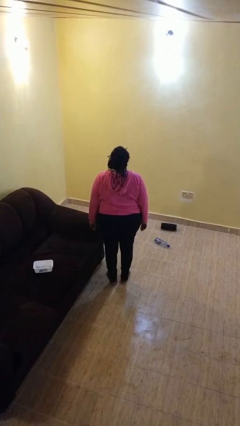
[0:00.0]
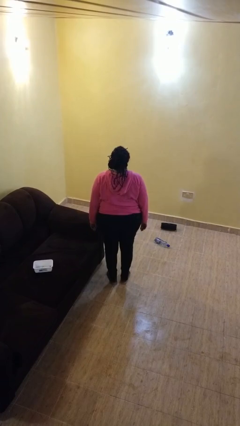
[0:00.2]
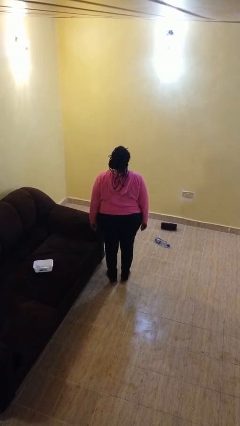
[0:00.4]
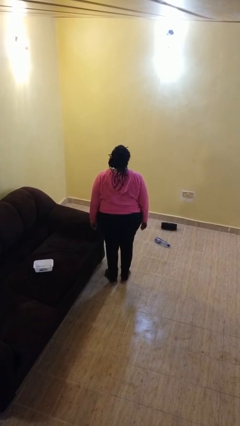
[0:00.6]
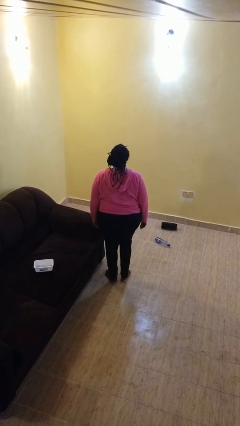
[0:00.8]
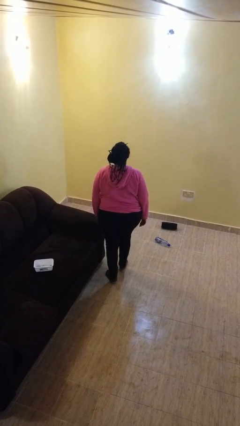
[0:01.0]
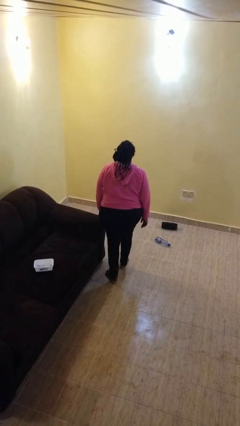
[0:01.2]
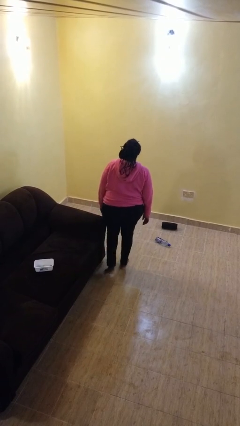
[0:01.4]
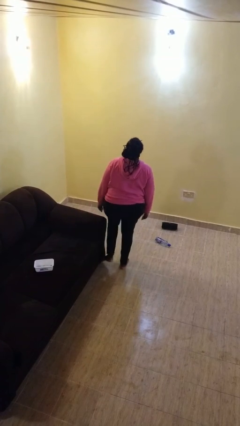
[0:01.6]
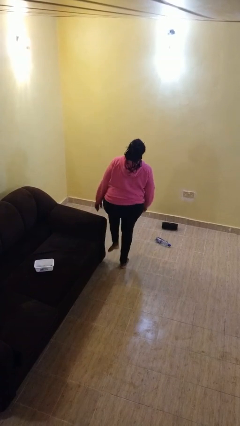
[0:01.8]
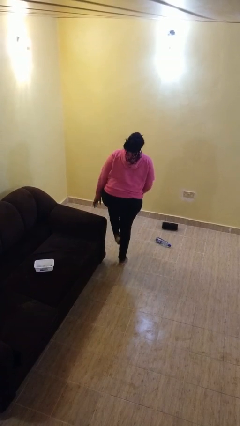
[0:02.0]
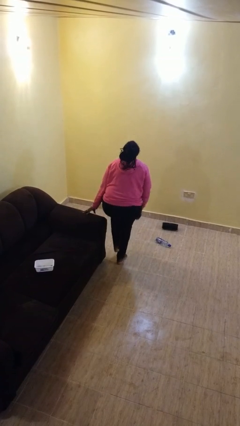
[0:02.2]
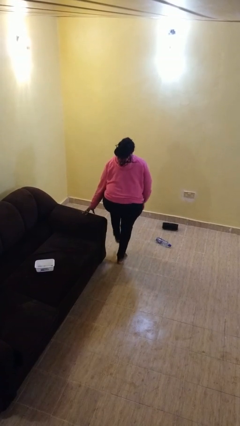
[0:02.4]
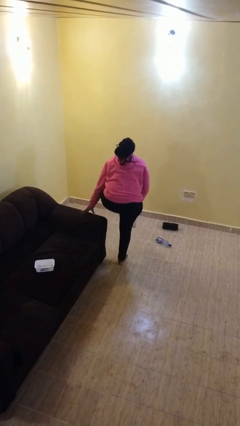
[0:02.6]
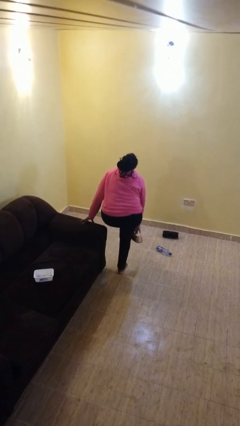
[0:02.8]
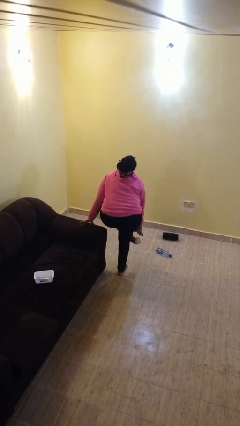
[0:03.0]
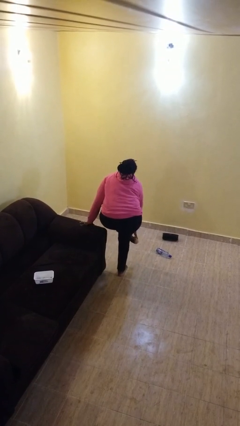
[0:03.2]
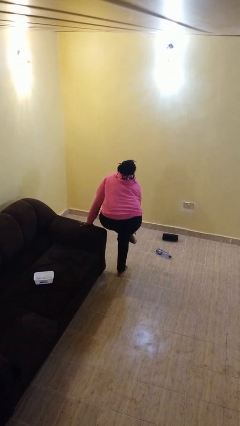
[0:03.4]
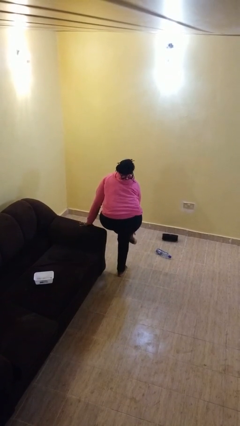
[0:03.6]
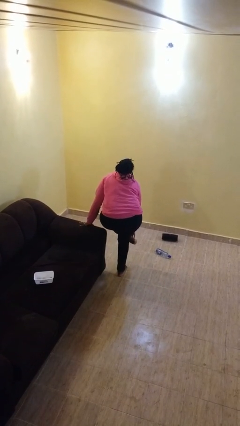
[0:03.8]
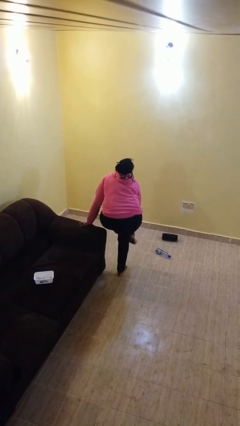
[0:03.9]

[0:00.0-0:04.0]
person stubs toe

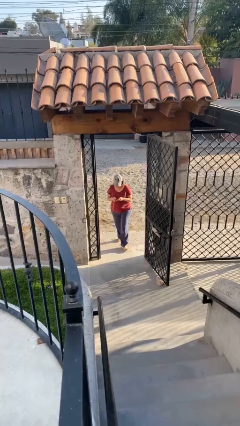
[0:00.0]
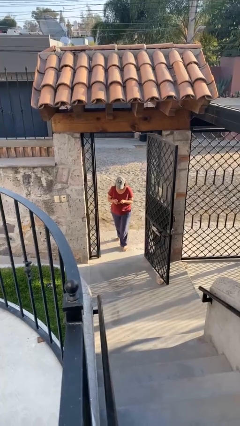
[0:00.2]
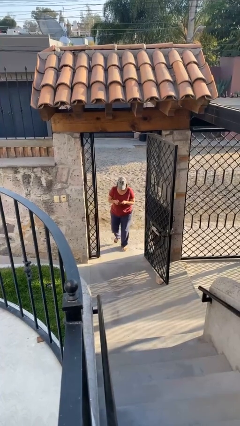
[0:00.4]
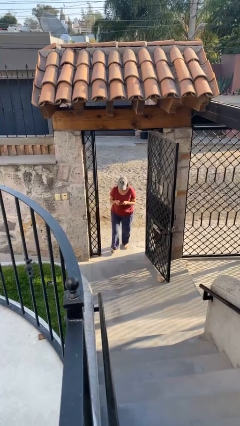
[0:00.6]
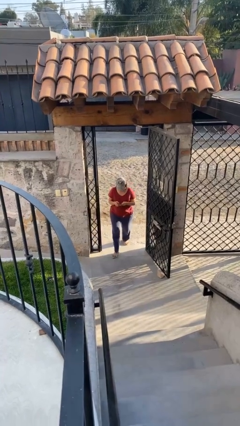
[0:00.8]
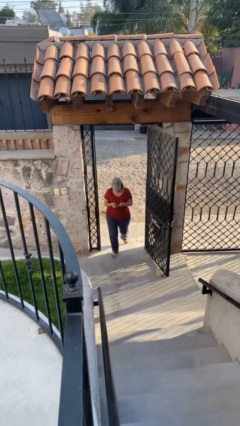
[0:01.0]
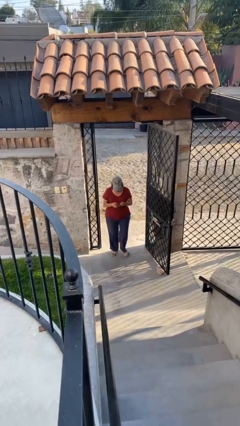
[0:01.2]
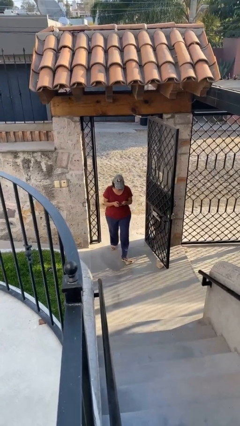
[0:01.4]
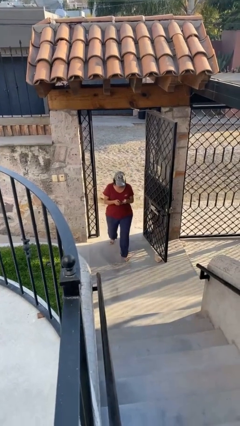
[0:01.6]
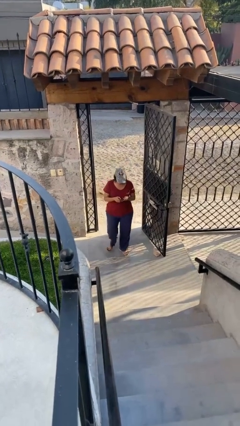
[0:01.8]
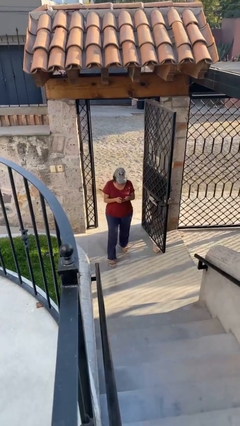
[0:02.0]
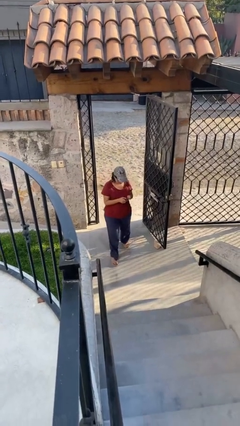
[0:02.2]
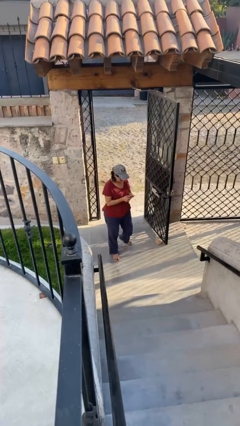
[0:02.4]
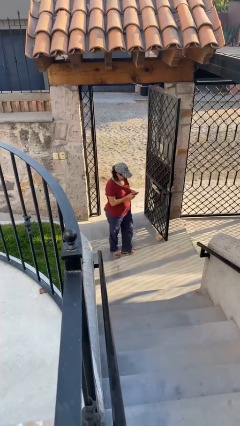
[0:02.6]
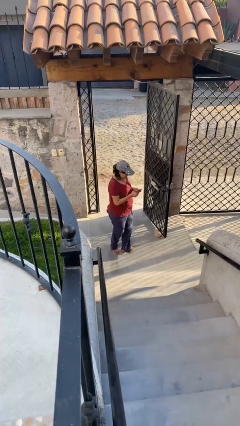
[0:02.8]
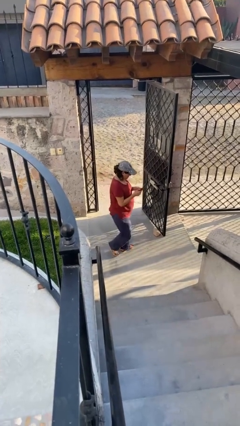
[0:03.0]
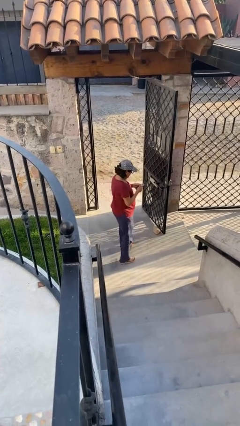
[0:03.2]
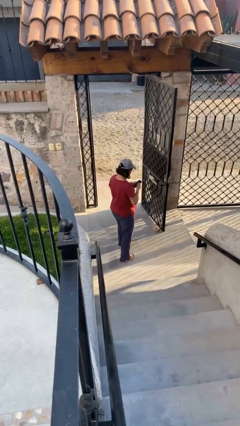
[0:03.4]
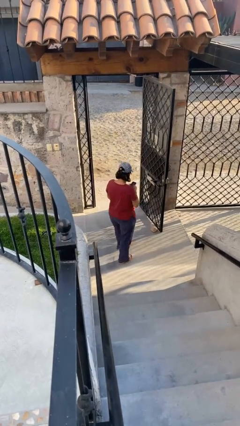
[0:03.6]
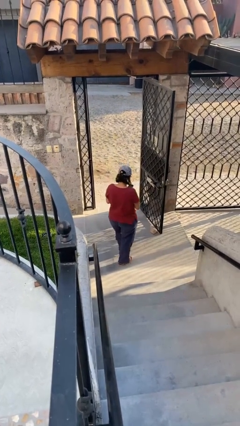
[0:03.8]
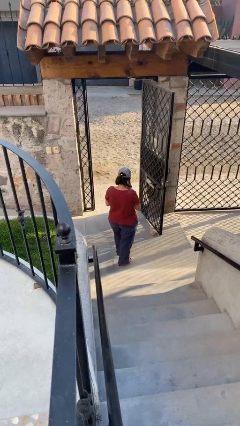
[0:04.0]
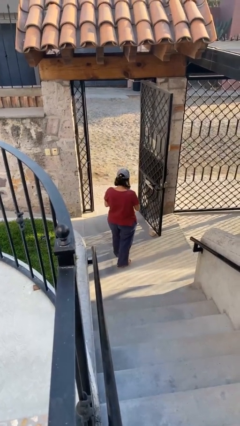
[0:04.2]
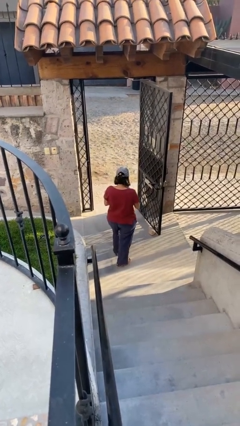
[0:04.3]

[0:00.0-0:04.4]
person enters scene through structure

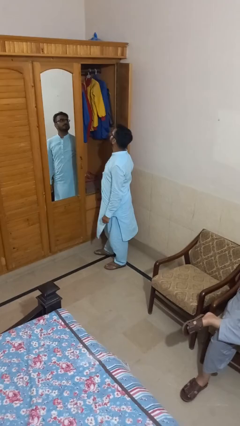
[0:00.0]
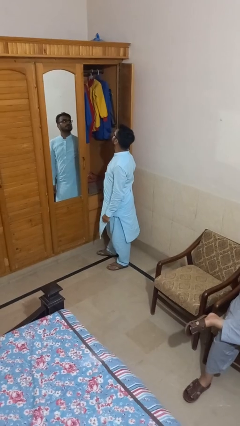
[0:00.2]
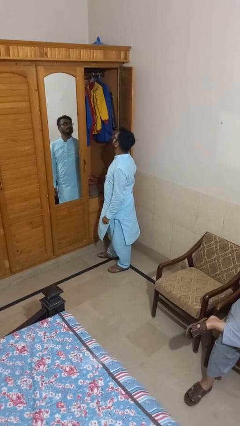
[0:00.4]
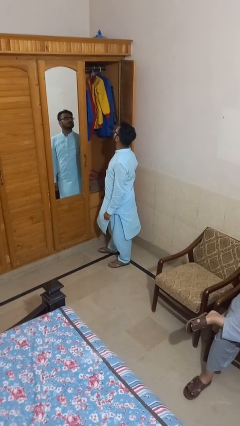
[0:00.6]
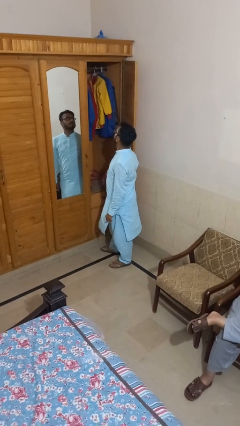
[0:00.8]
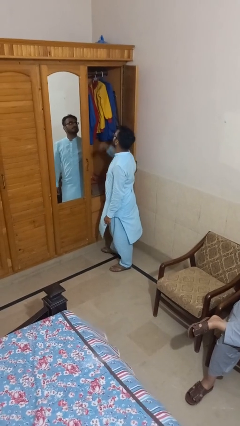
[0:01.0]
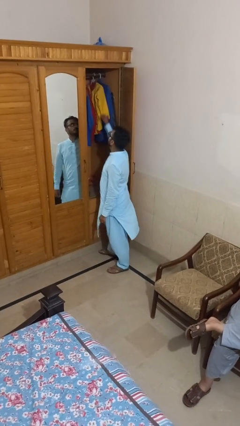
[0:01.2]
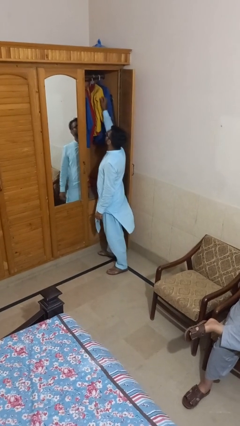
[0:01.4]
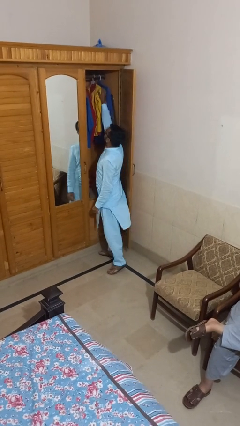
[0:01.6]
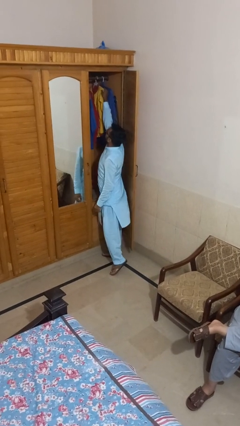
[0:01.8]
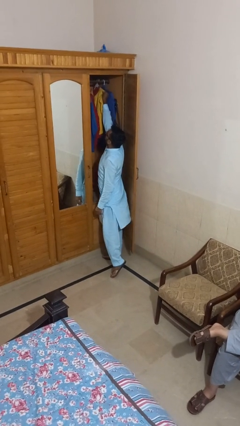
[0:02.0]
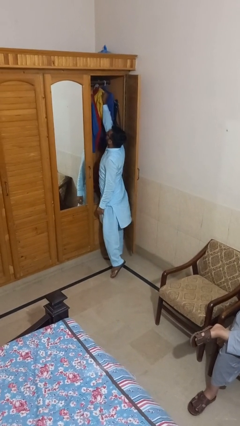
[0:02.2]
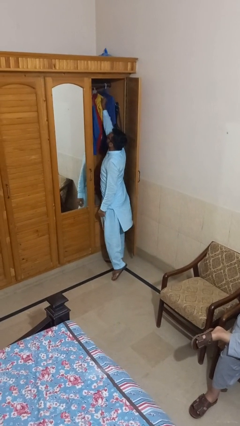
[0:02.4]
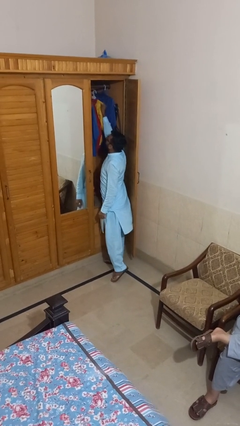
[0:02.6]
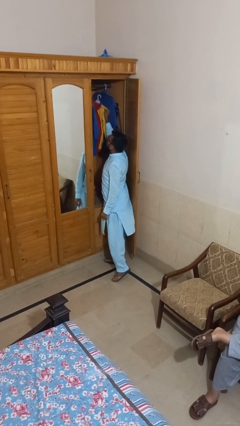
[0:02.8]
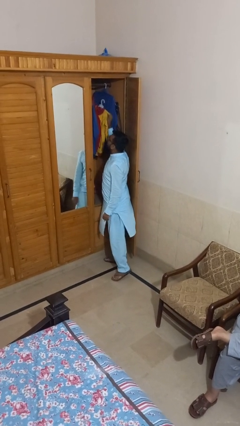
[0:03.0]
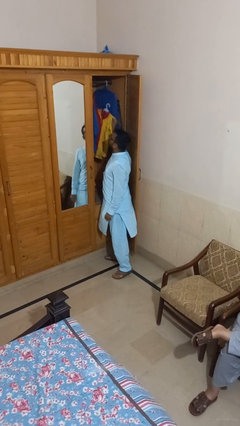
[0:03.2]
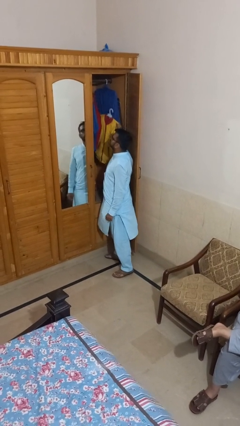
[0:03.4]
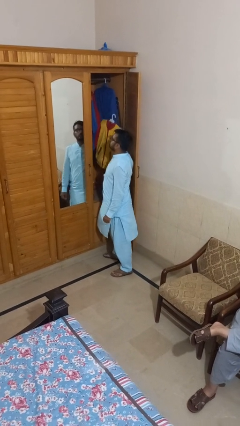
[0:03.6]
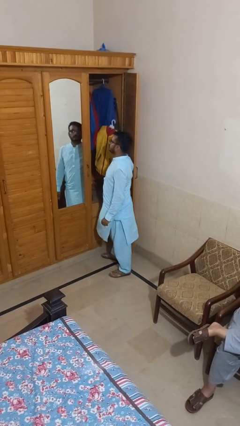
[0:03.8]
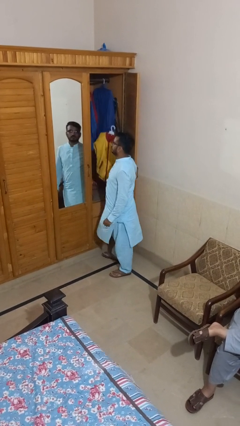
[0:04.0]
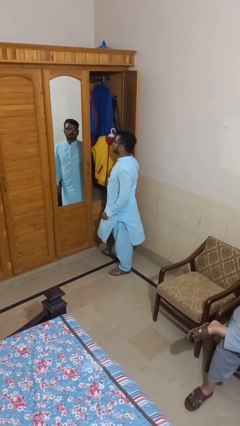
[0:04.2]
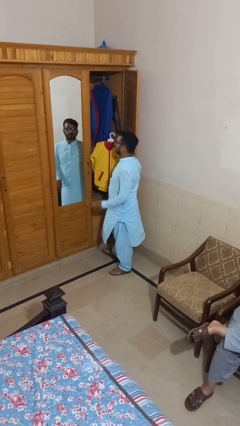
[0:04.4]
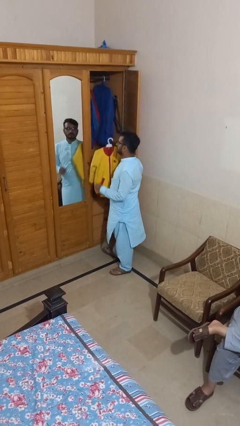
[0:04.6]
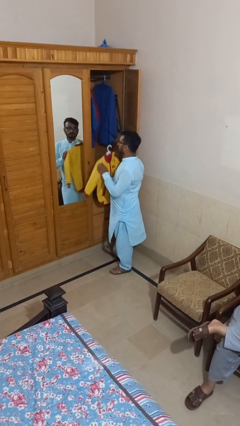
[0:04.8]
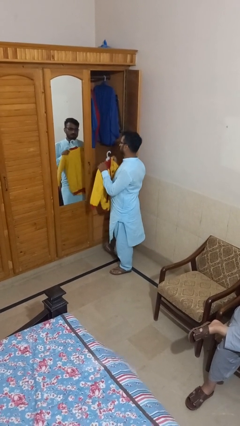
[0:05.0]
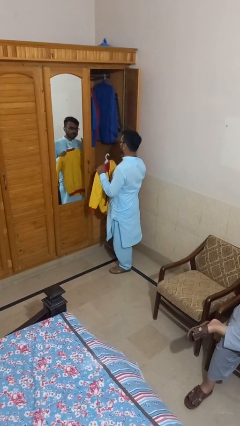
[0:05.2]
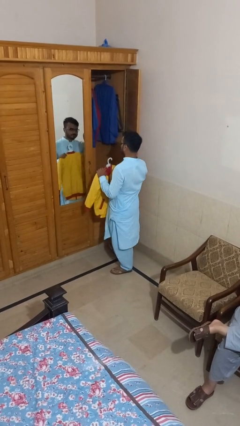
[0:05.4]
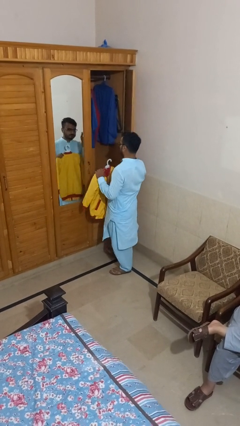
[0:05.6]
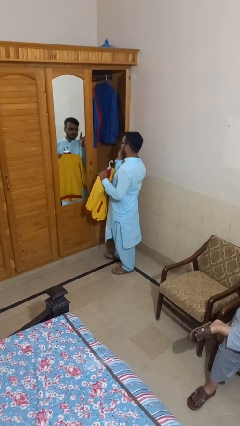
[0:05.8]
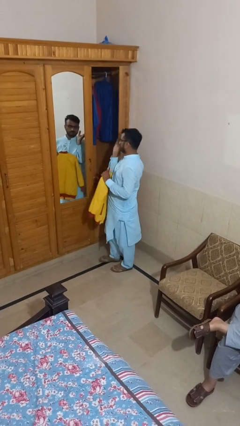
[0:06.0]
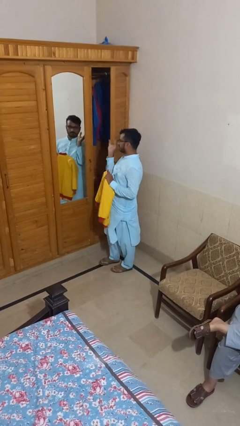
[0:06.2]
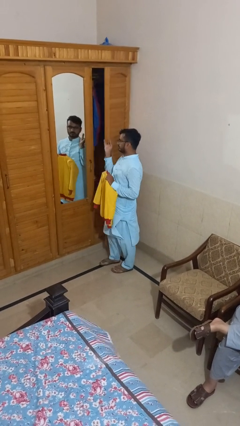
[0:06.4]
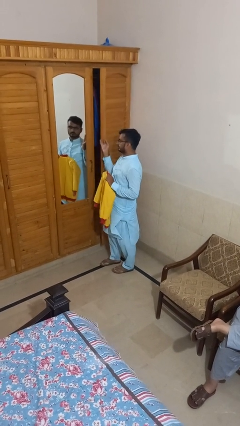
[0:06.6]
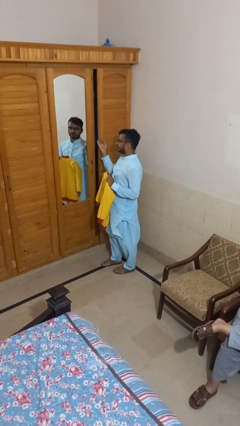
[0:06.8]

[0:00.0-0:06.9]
person takes clothes from closet

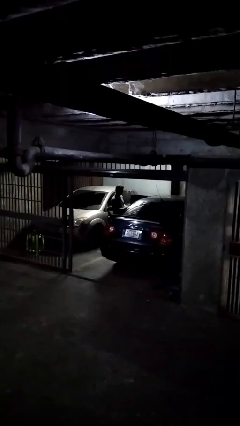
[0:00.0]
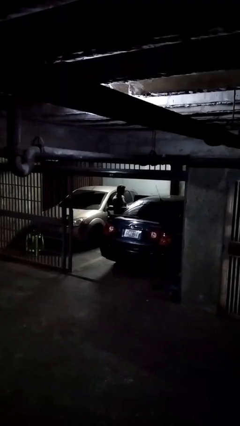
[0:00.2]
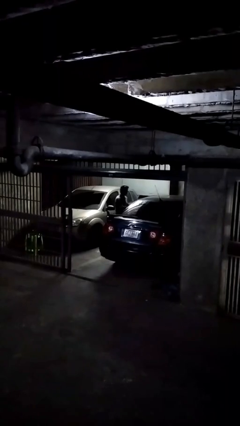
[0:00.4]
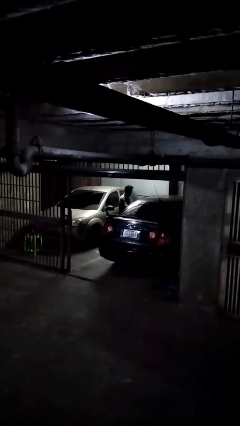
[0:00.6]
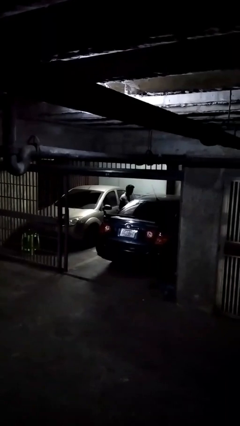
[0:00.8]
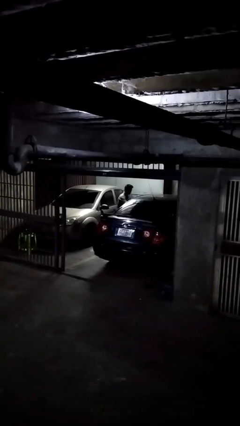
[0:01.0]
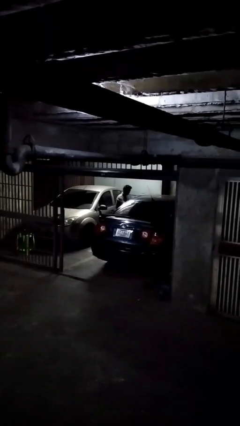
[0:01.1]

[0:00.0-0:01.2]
person closes car door

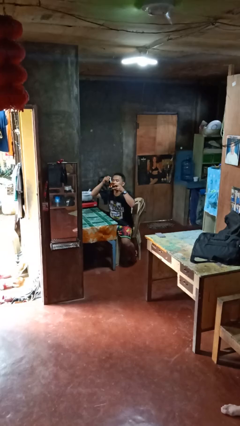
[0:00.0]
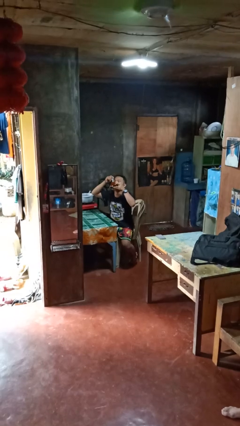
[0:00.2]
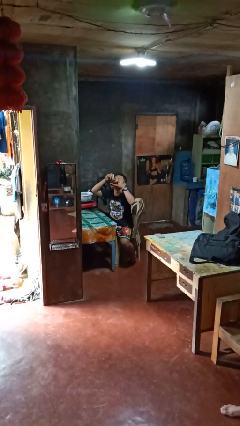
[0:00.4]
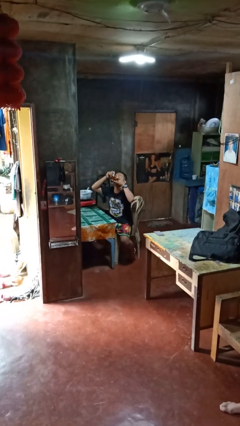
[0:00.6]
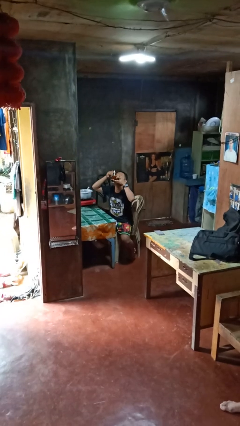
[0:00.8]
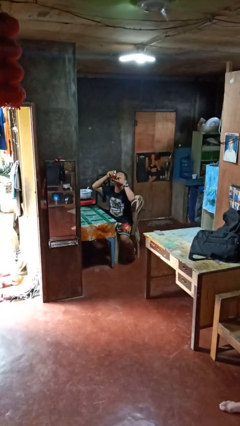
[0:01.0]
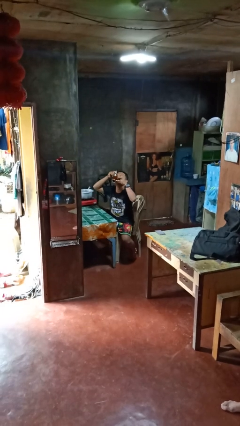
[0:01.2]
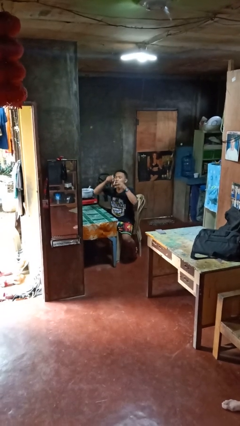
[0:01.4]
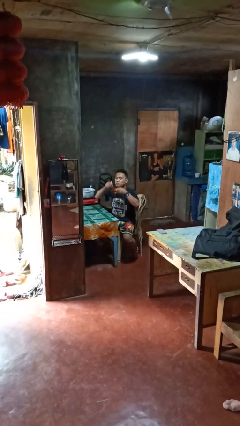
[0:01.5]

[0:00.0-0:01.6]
person drinks from mug
